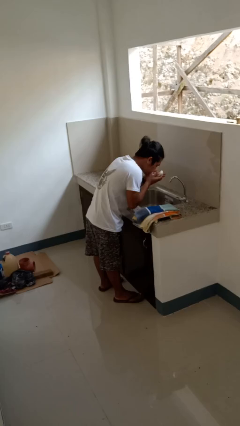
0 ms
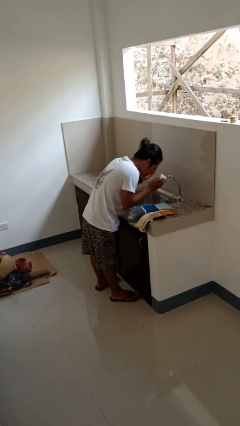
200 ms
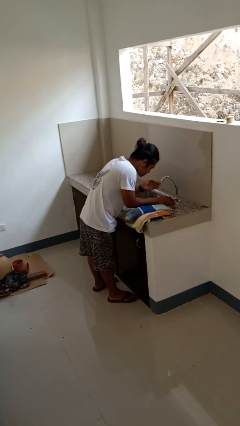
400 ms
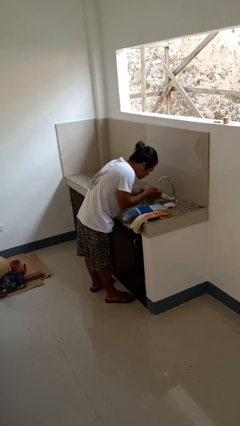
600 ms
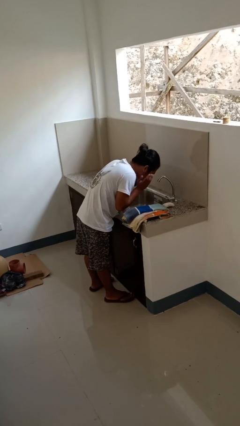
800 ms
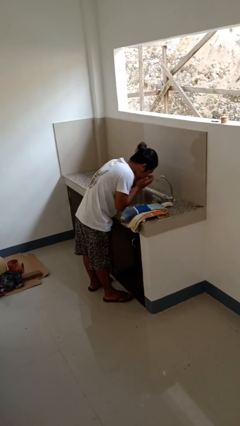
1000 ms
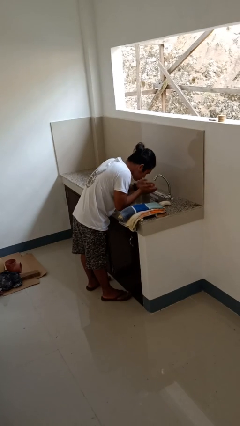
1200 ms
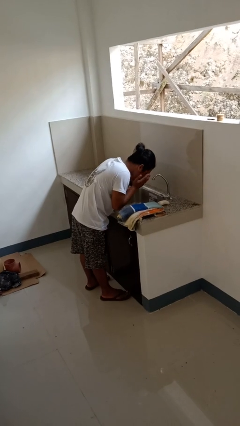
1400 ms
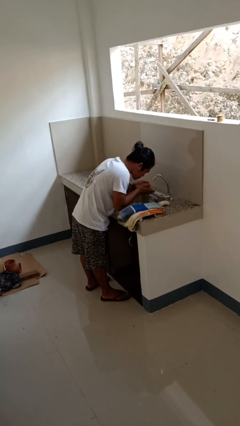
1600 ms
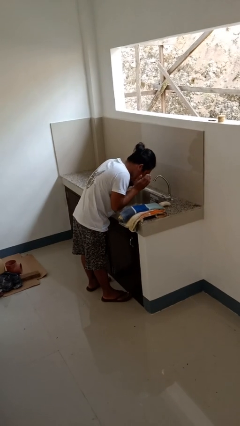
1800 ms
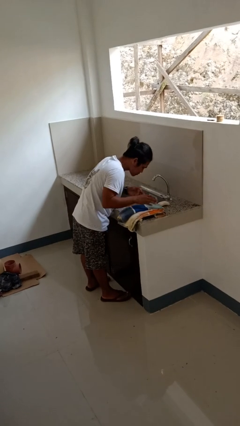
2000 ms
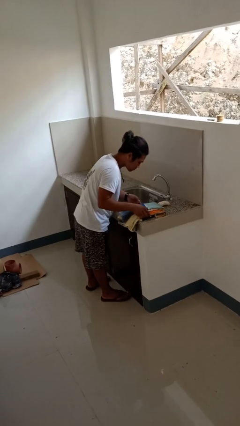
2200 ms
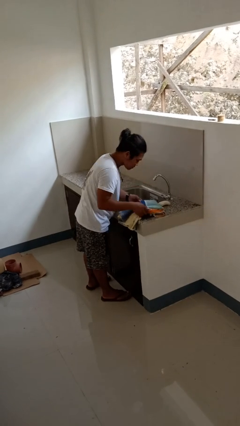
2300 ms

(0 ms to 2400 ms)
person washes face

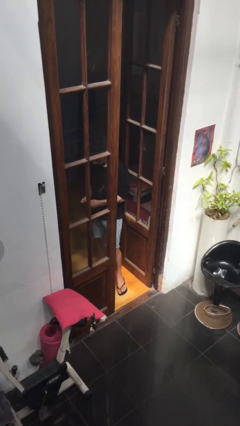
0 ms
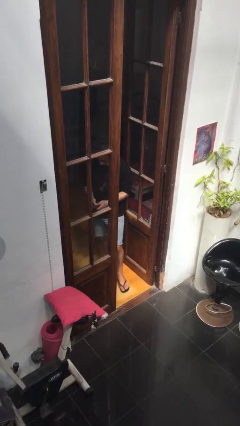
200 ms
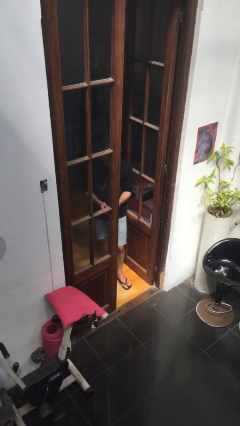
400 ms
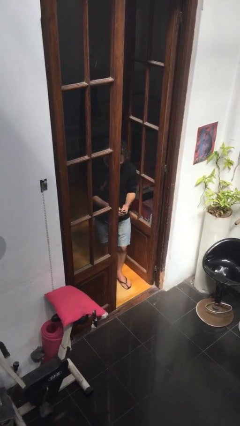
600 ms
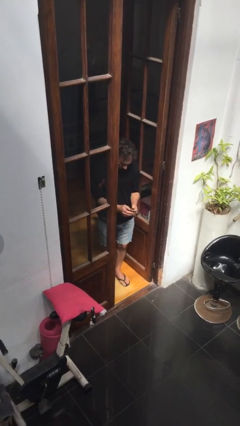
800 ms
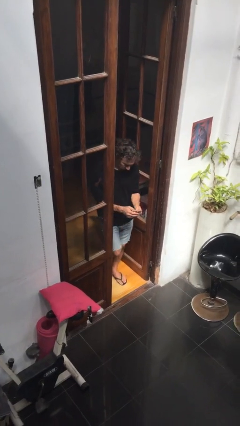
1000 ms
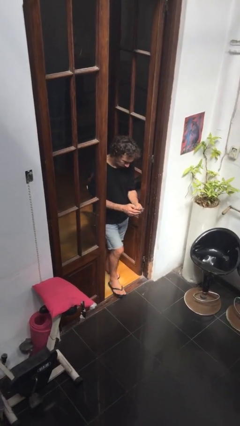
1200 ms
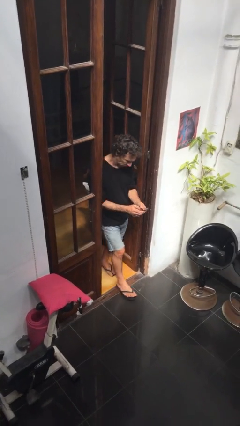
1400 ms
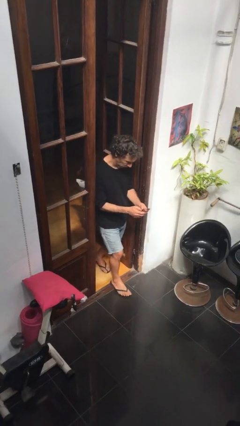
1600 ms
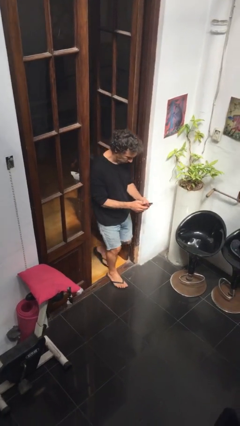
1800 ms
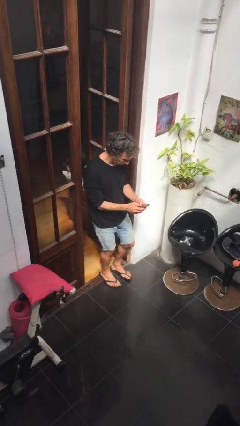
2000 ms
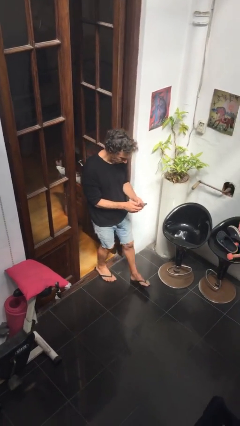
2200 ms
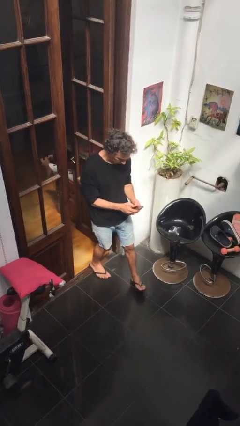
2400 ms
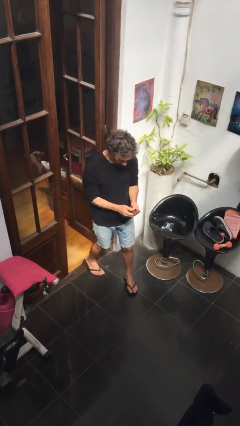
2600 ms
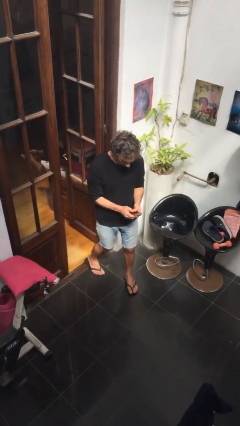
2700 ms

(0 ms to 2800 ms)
person enters scene through structure

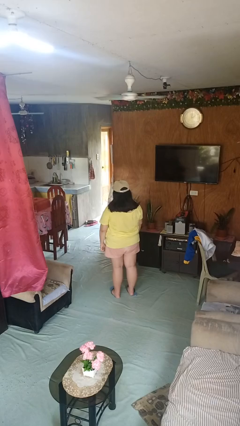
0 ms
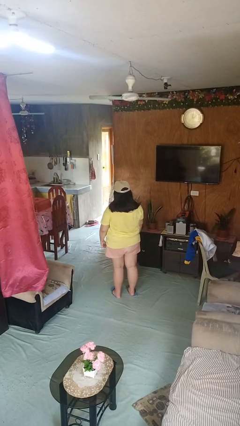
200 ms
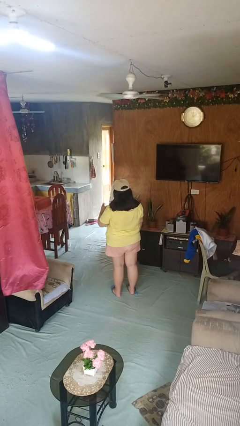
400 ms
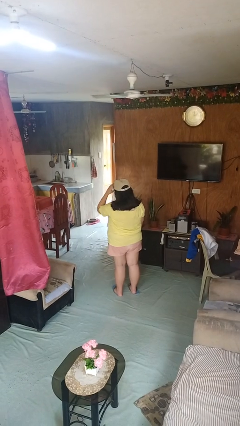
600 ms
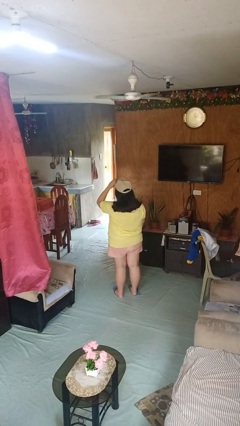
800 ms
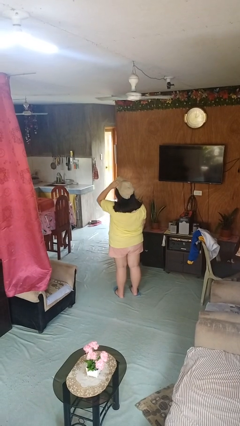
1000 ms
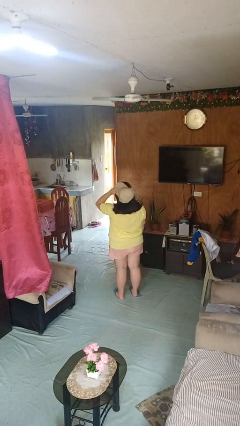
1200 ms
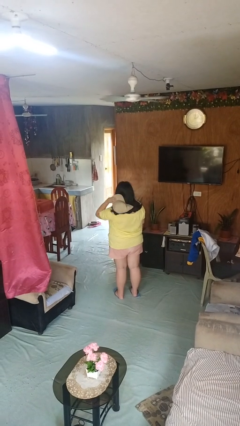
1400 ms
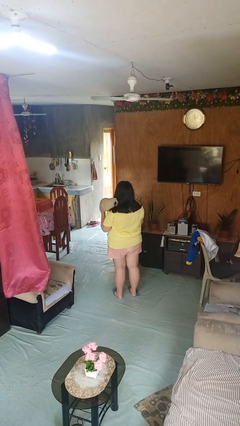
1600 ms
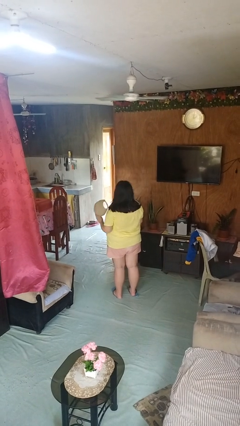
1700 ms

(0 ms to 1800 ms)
person takes off hat

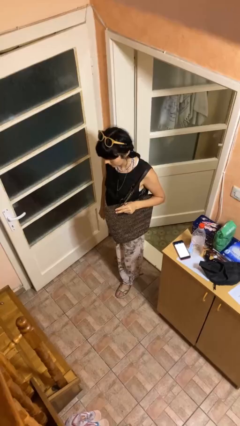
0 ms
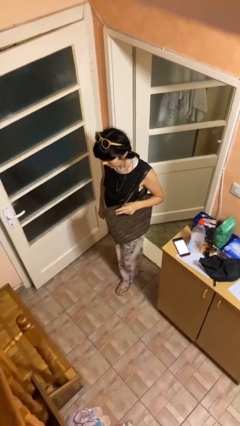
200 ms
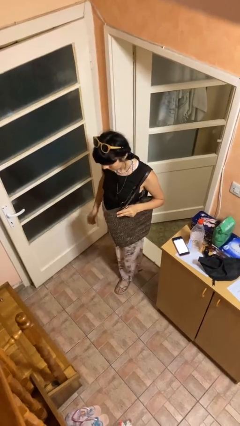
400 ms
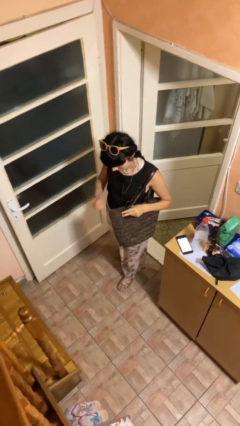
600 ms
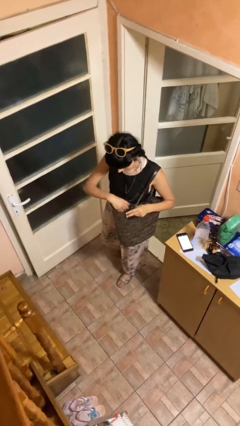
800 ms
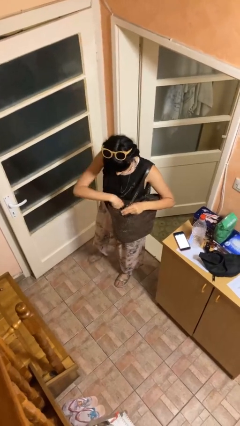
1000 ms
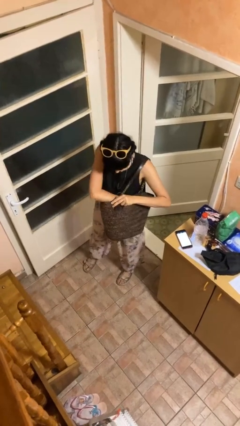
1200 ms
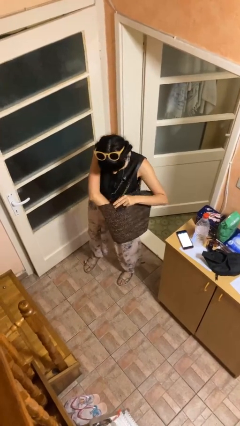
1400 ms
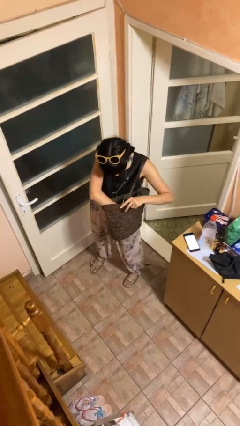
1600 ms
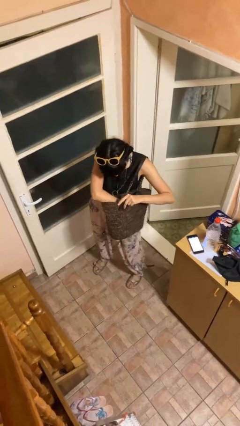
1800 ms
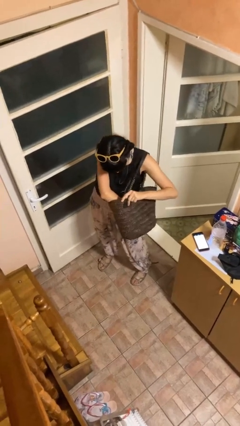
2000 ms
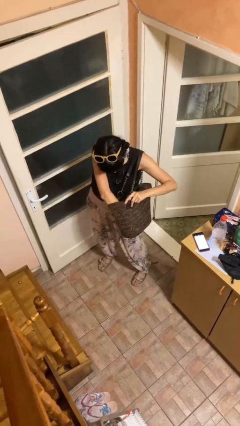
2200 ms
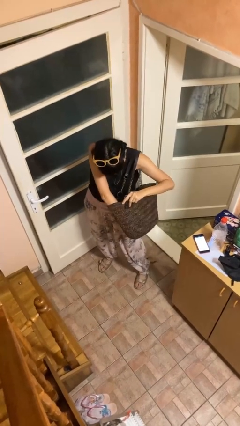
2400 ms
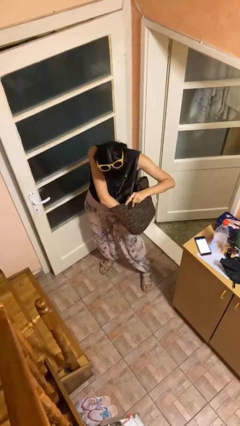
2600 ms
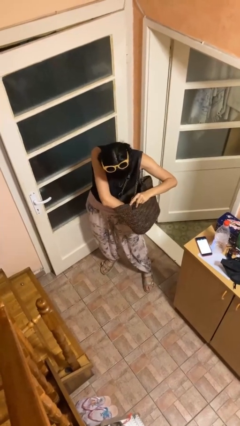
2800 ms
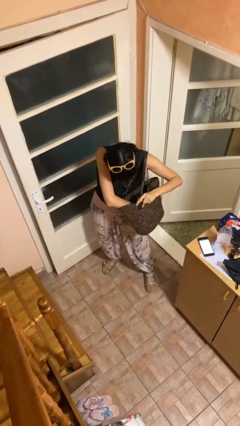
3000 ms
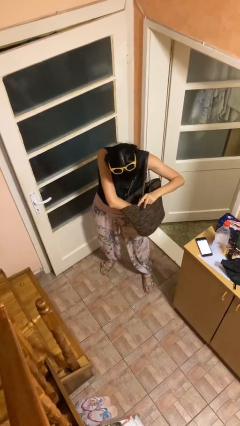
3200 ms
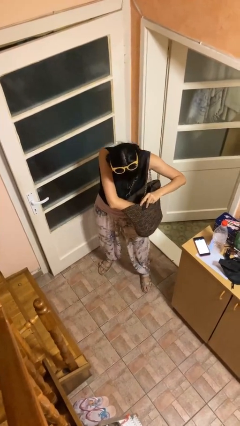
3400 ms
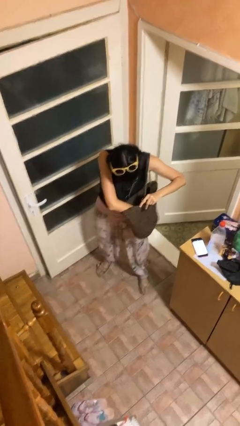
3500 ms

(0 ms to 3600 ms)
person searches in purse

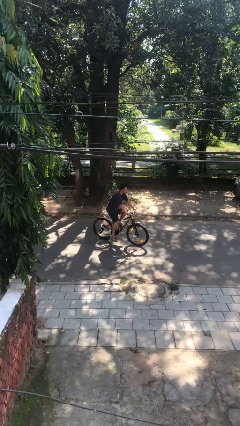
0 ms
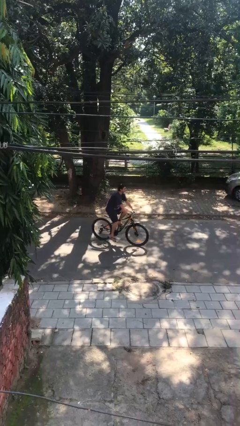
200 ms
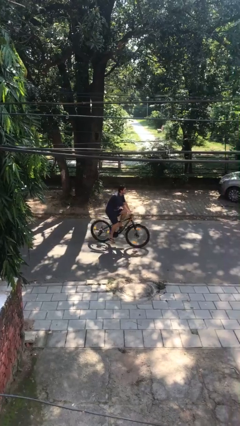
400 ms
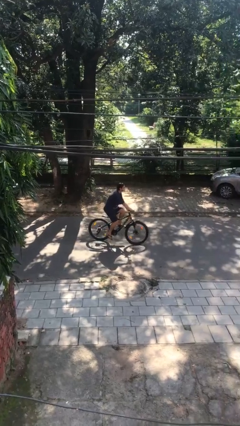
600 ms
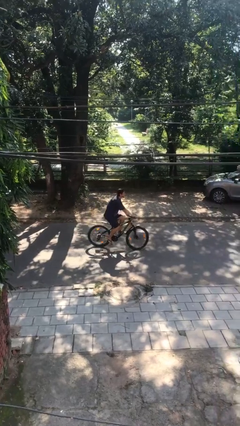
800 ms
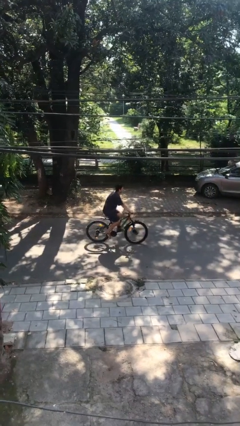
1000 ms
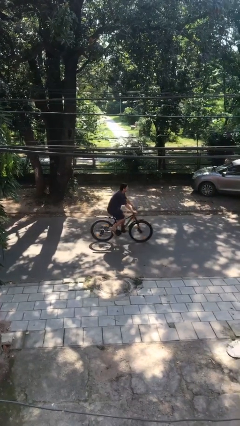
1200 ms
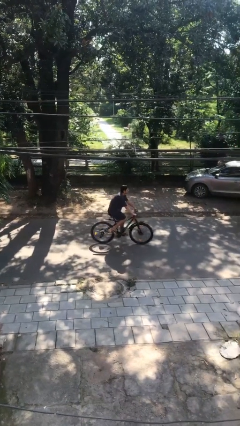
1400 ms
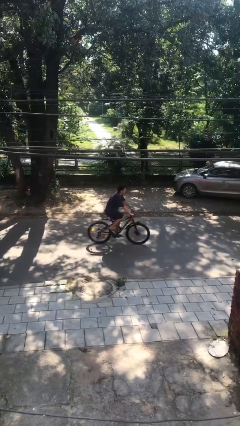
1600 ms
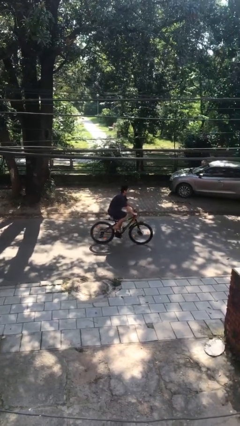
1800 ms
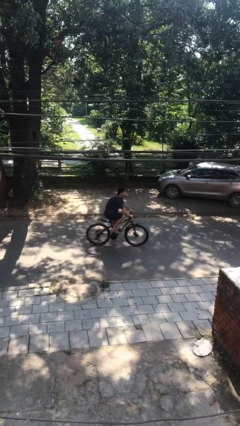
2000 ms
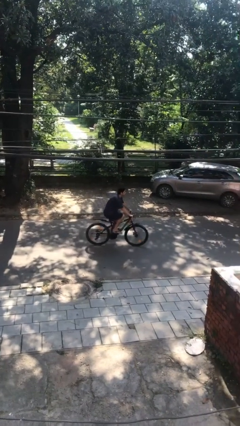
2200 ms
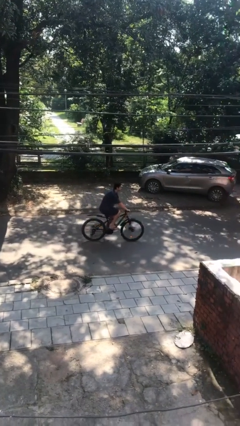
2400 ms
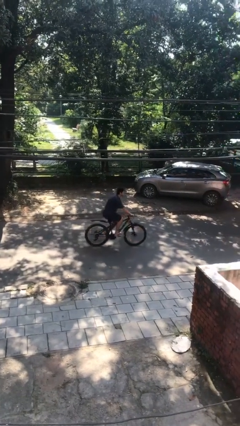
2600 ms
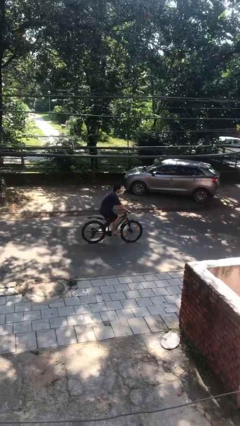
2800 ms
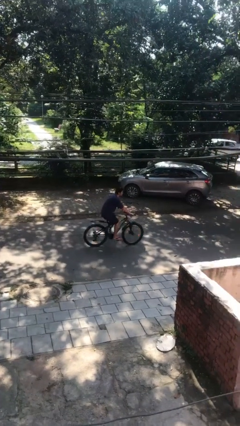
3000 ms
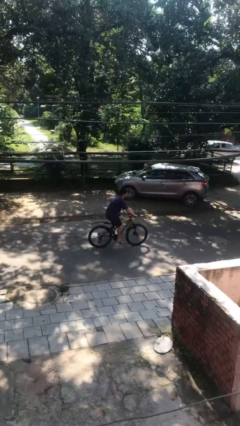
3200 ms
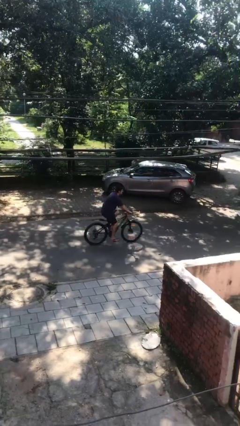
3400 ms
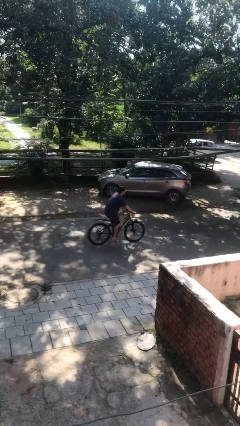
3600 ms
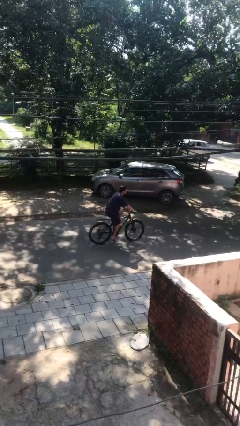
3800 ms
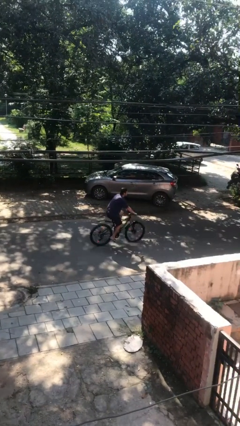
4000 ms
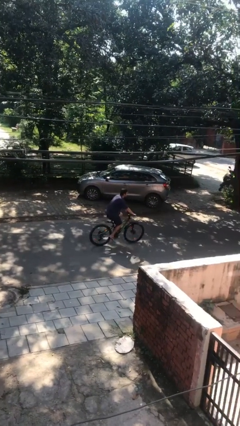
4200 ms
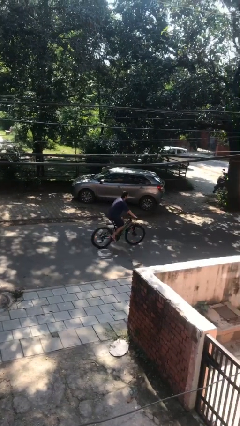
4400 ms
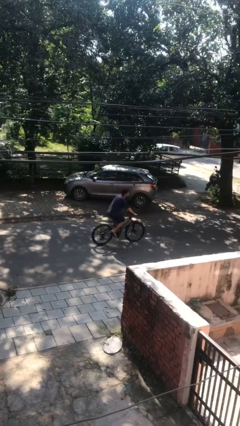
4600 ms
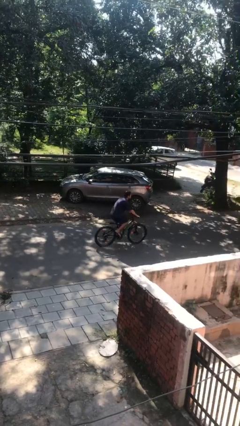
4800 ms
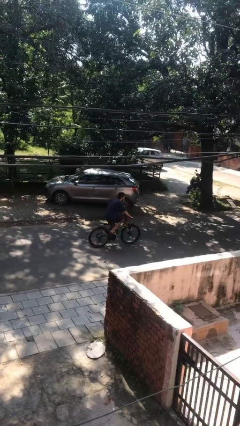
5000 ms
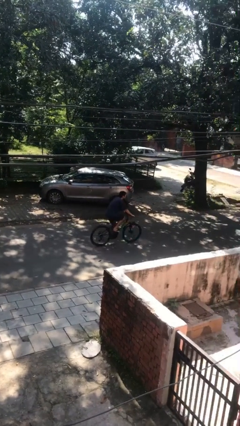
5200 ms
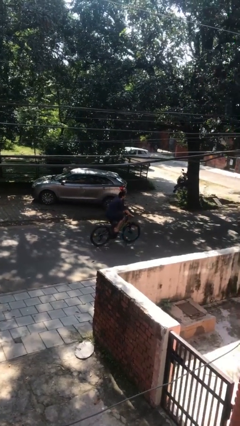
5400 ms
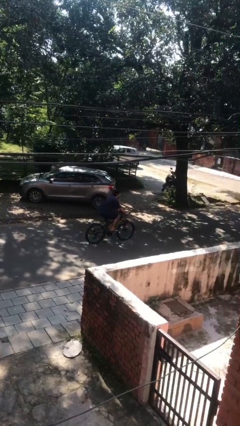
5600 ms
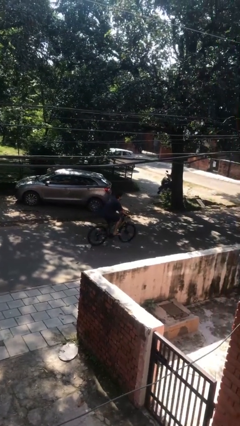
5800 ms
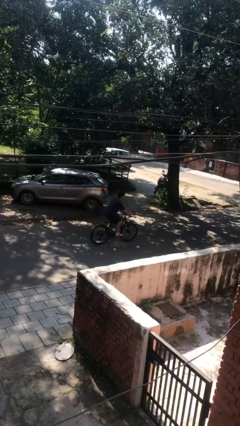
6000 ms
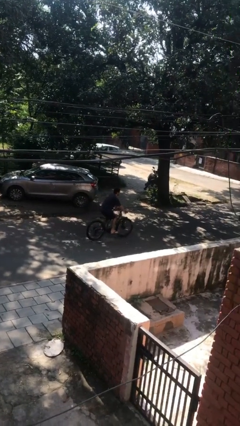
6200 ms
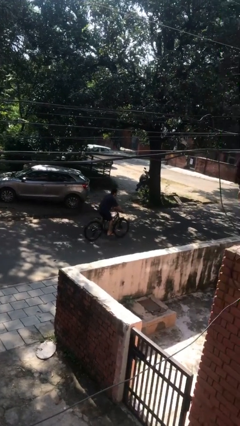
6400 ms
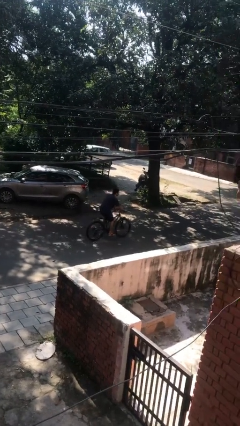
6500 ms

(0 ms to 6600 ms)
person rides bicycle

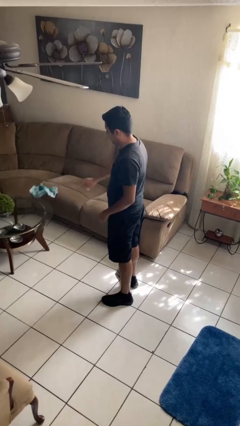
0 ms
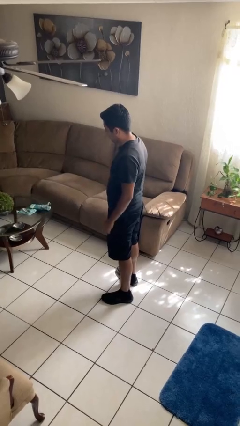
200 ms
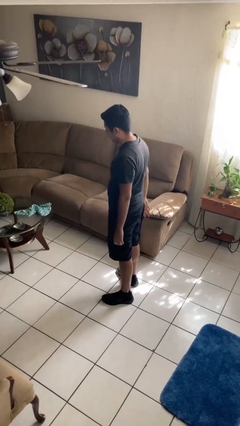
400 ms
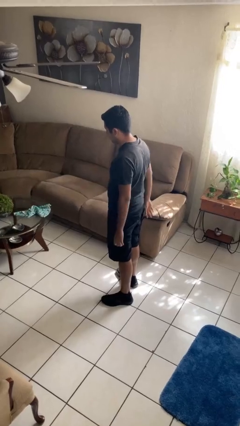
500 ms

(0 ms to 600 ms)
person throws object on table
